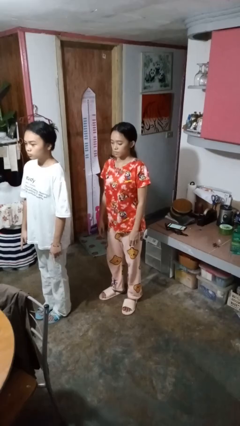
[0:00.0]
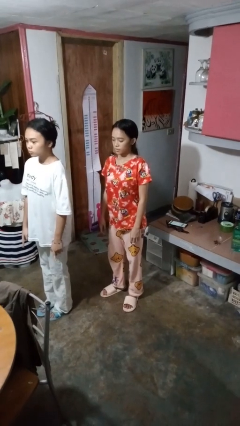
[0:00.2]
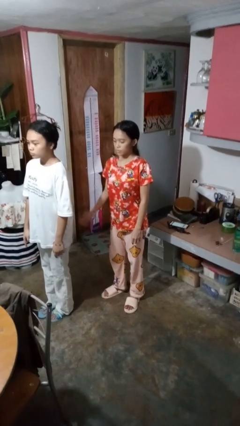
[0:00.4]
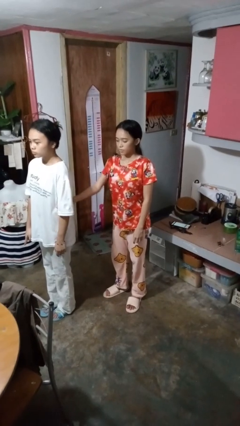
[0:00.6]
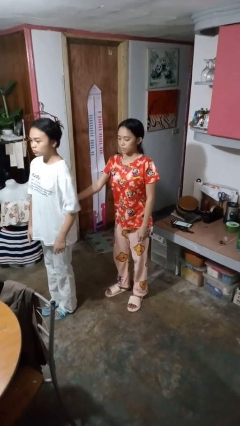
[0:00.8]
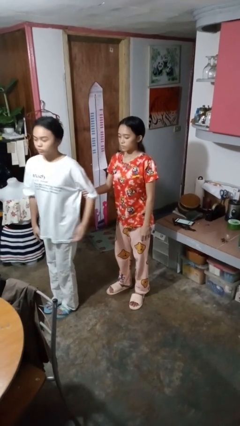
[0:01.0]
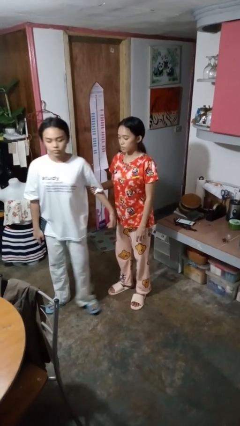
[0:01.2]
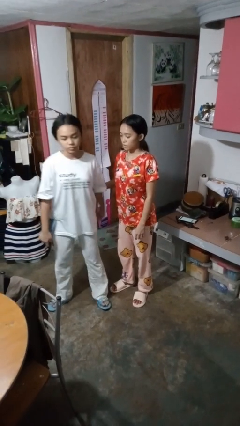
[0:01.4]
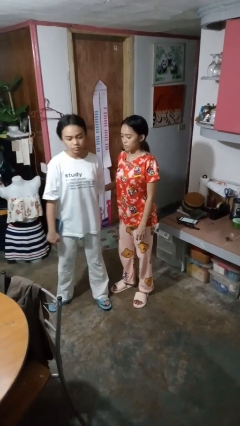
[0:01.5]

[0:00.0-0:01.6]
person grabs person by bicep

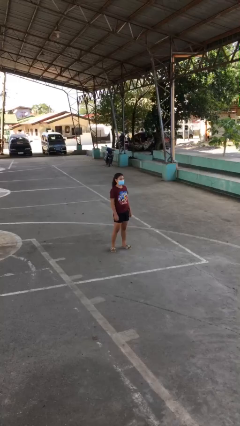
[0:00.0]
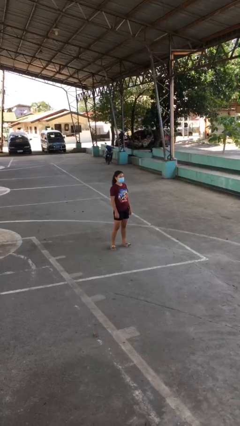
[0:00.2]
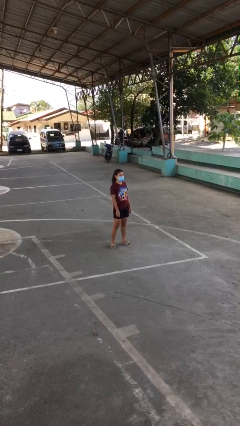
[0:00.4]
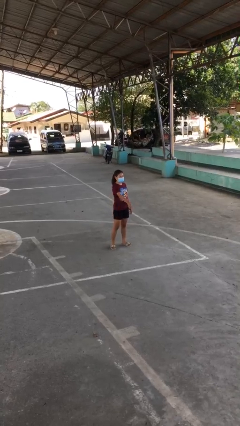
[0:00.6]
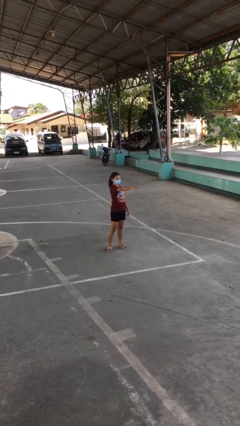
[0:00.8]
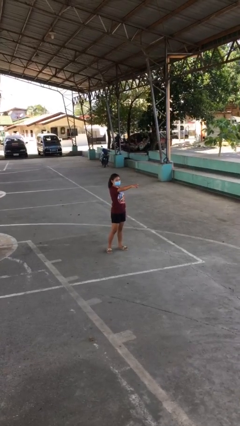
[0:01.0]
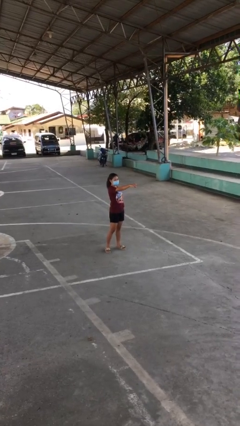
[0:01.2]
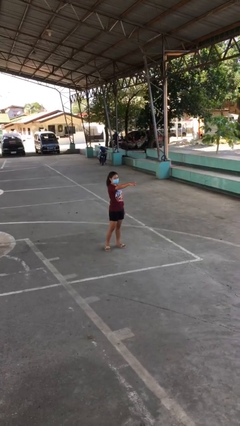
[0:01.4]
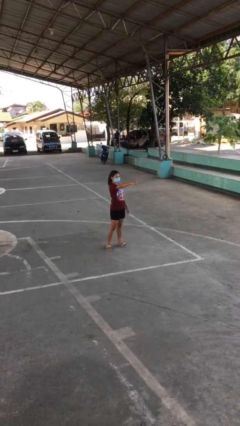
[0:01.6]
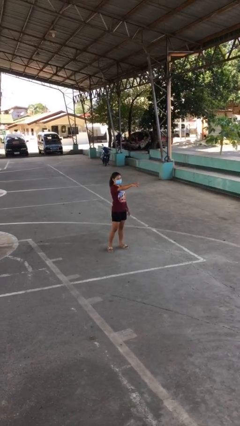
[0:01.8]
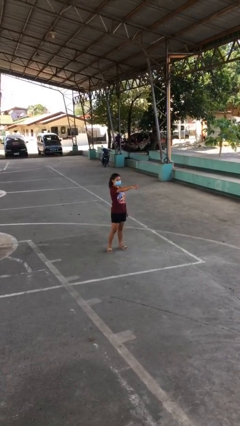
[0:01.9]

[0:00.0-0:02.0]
person points at person

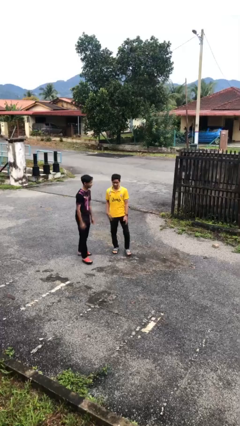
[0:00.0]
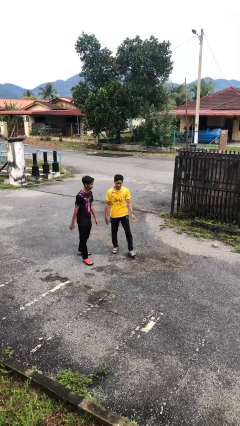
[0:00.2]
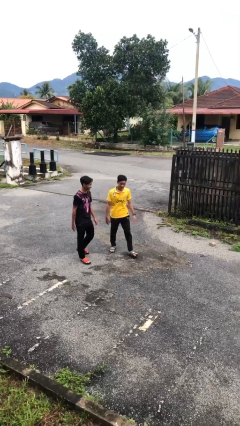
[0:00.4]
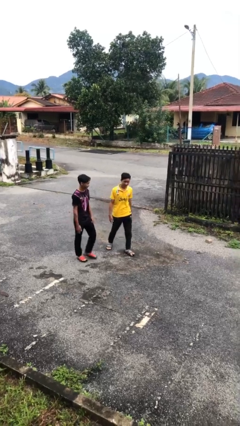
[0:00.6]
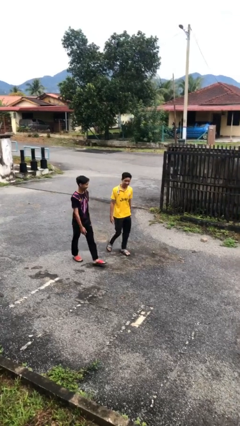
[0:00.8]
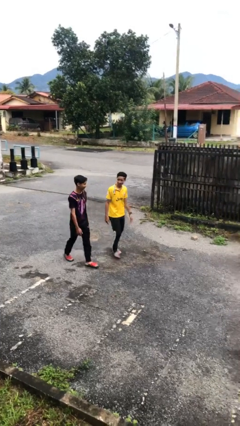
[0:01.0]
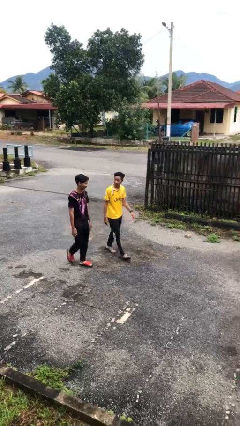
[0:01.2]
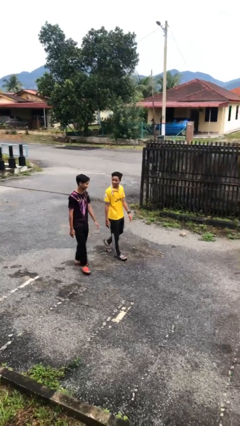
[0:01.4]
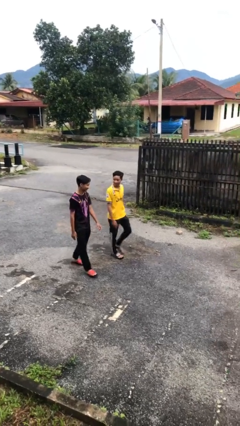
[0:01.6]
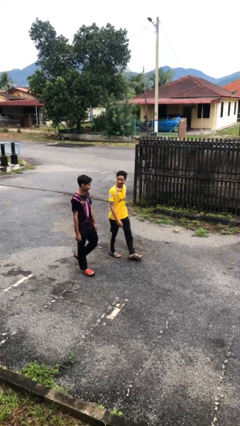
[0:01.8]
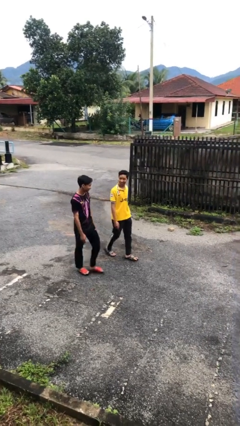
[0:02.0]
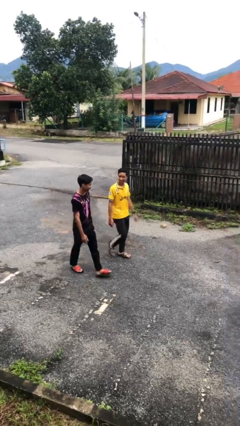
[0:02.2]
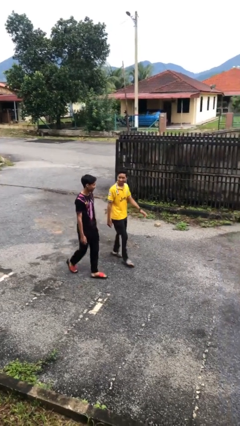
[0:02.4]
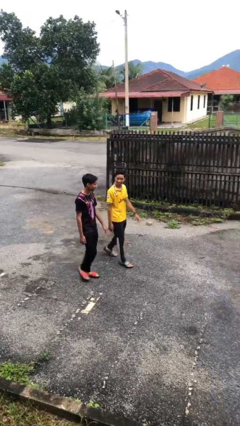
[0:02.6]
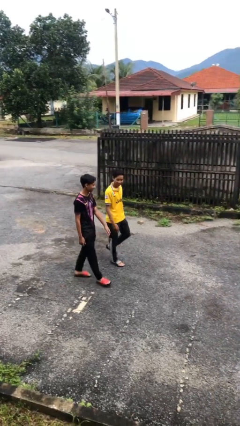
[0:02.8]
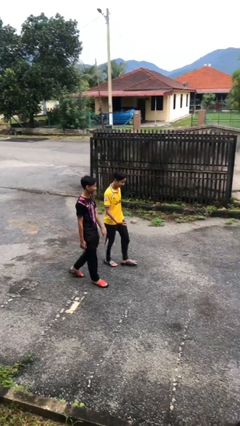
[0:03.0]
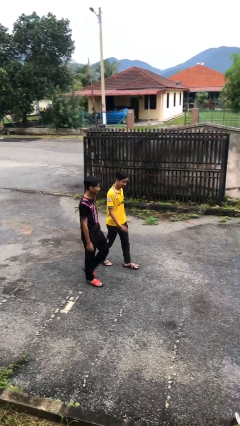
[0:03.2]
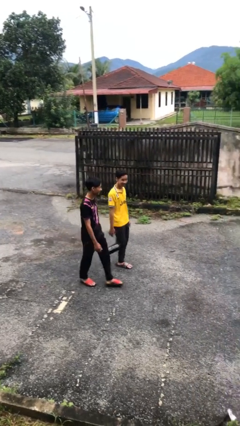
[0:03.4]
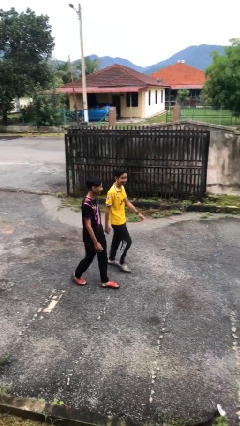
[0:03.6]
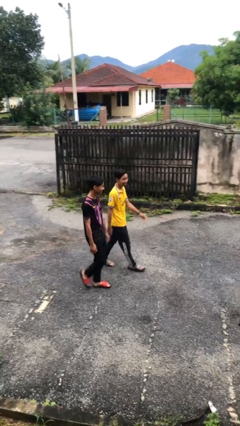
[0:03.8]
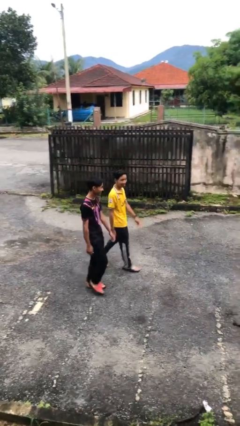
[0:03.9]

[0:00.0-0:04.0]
person talks to person

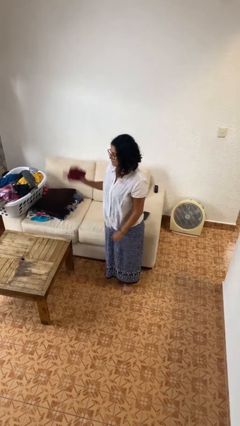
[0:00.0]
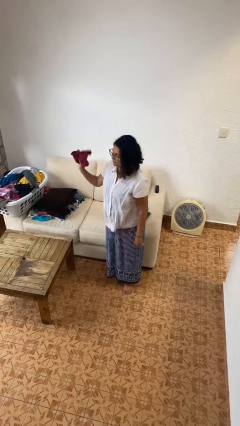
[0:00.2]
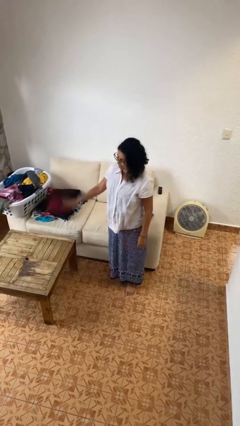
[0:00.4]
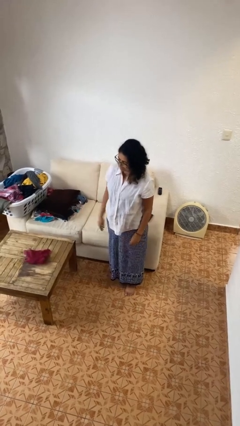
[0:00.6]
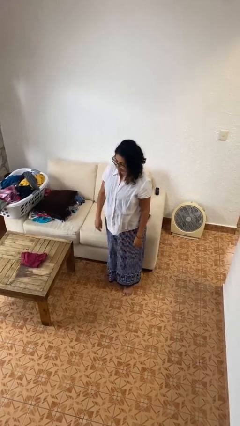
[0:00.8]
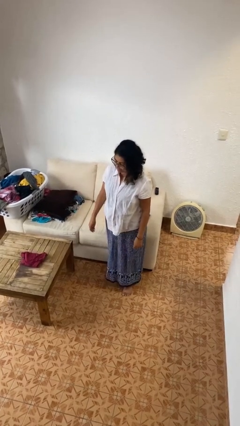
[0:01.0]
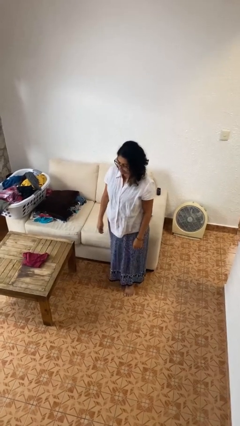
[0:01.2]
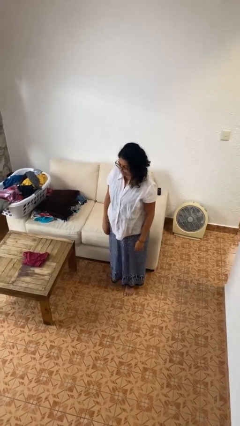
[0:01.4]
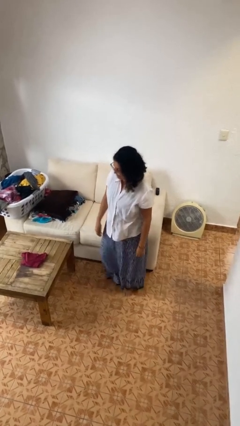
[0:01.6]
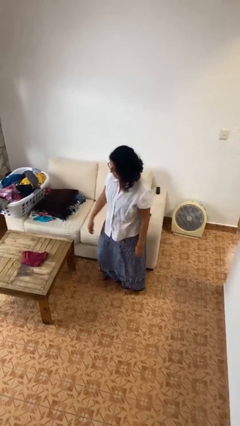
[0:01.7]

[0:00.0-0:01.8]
person throws object on table

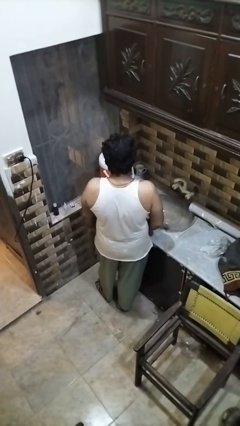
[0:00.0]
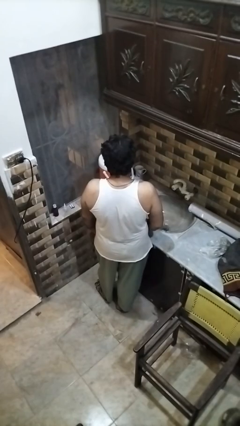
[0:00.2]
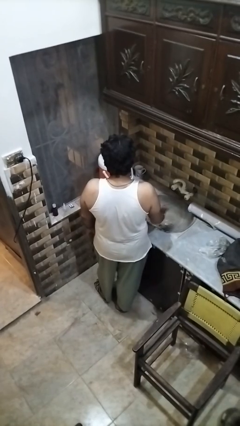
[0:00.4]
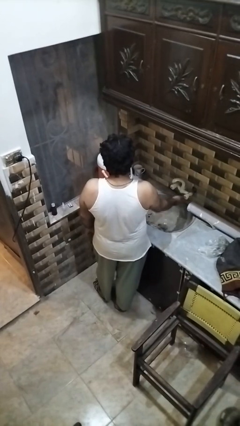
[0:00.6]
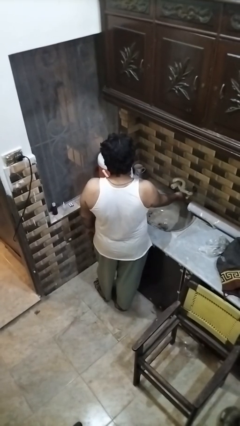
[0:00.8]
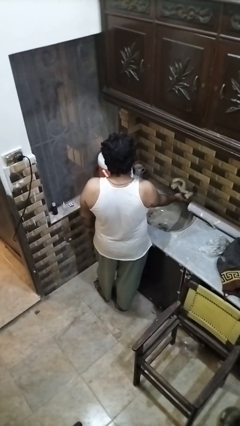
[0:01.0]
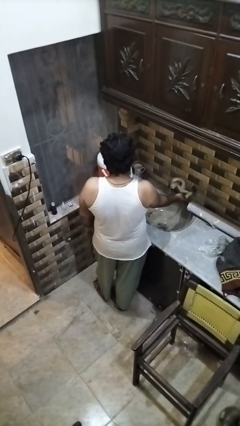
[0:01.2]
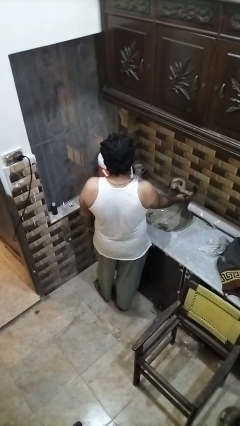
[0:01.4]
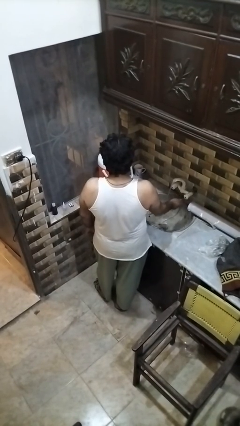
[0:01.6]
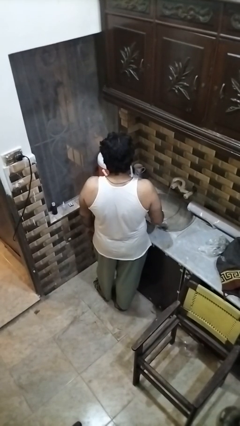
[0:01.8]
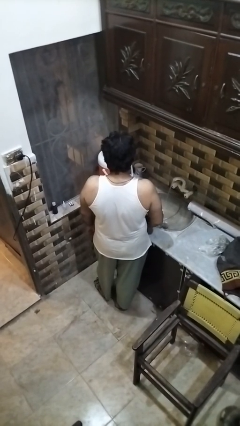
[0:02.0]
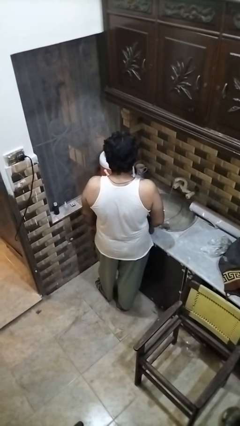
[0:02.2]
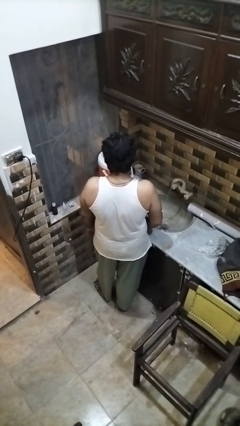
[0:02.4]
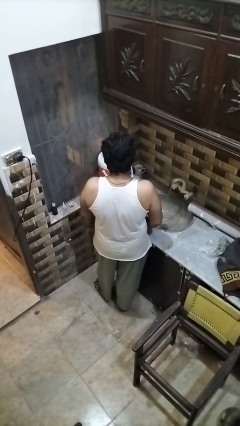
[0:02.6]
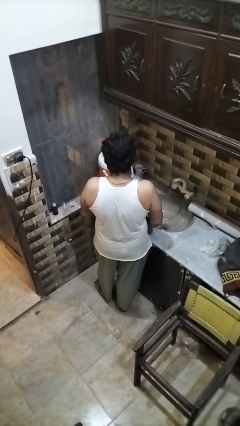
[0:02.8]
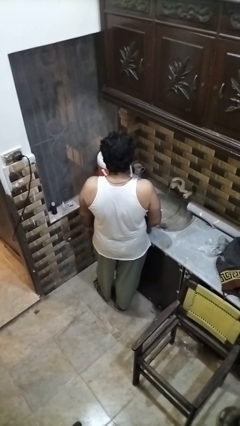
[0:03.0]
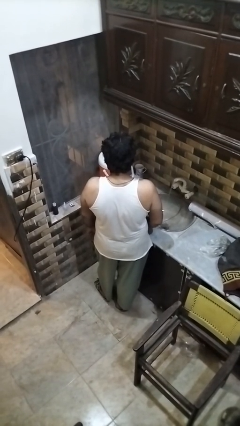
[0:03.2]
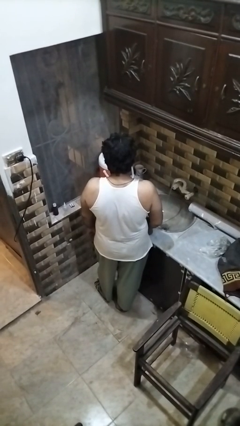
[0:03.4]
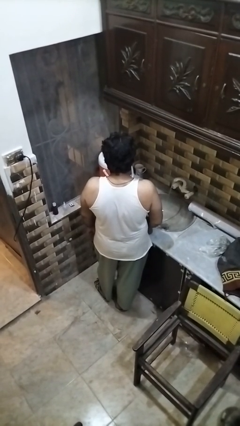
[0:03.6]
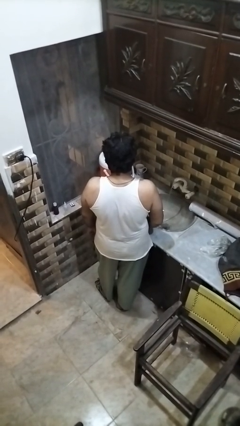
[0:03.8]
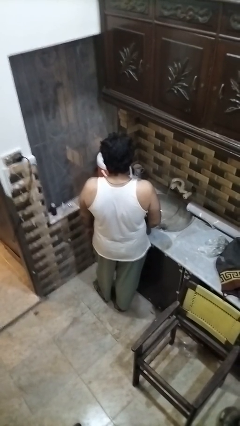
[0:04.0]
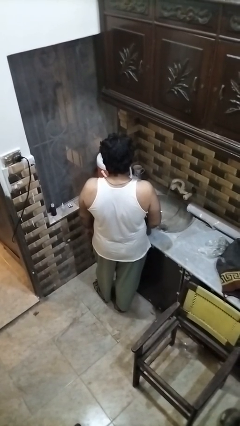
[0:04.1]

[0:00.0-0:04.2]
person turns on faucet

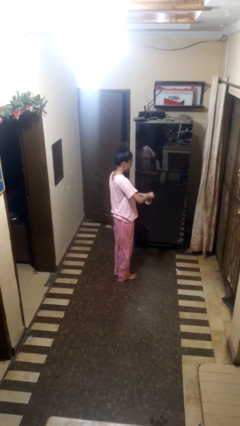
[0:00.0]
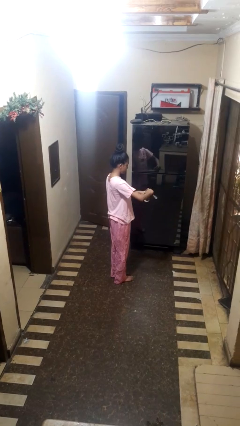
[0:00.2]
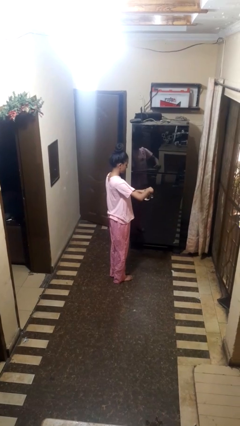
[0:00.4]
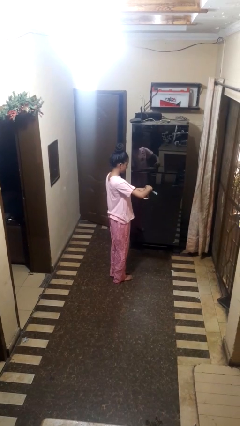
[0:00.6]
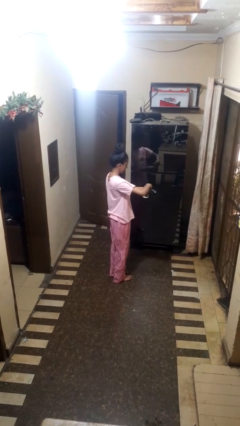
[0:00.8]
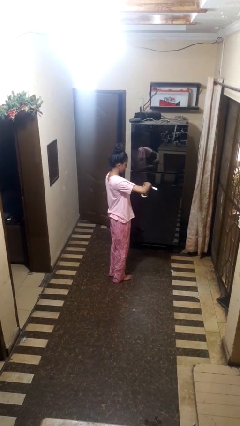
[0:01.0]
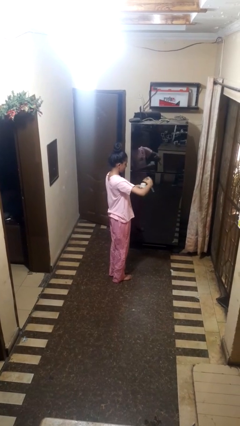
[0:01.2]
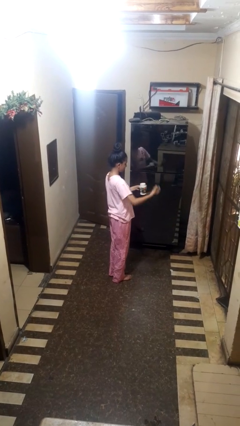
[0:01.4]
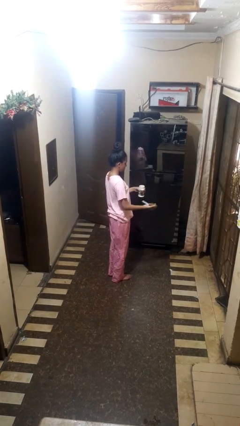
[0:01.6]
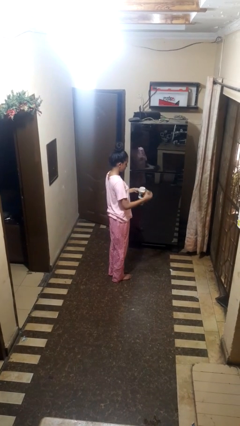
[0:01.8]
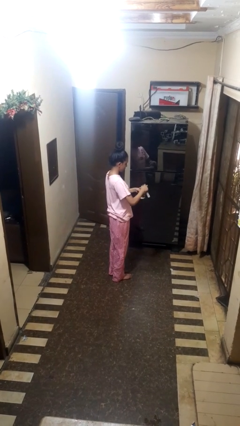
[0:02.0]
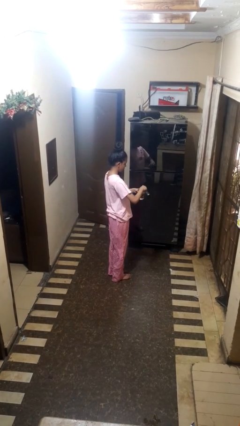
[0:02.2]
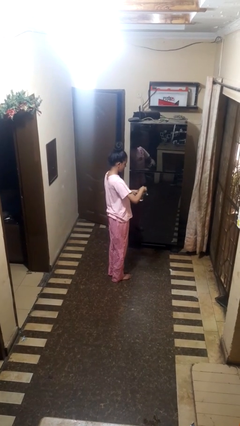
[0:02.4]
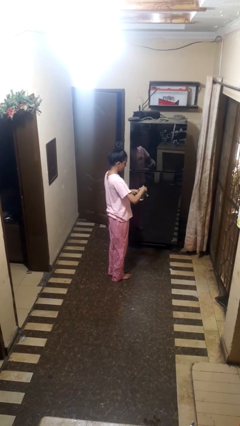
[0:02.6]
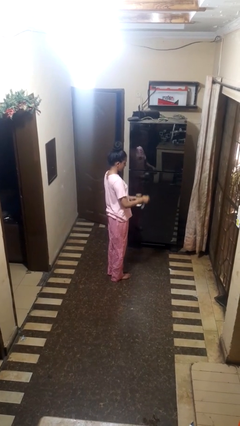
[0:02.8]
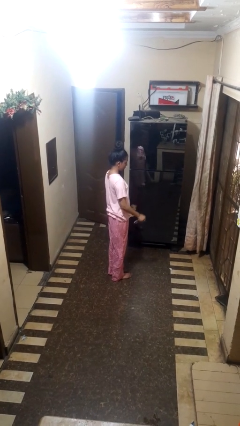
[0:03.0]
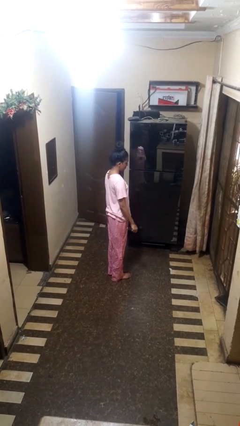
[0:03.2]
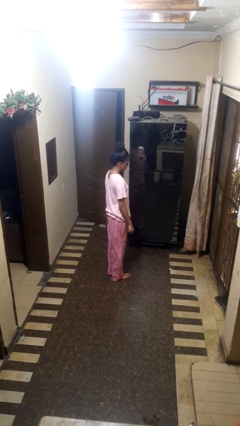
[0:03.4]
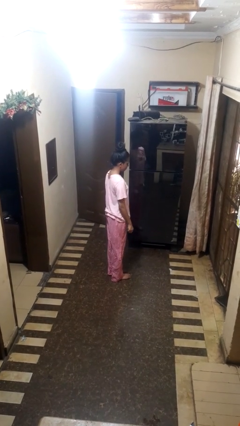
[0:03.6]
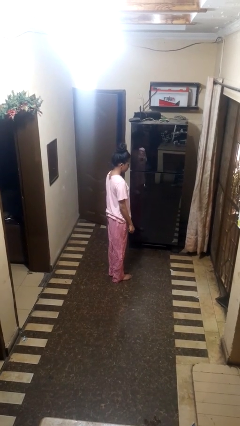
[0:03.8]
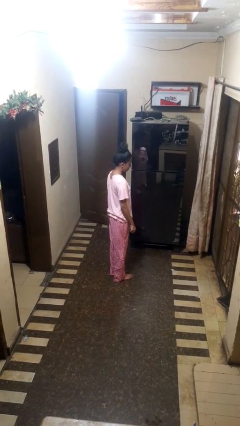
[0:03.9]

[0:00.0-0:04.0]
person opens can with can opener
